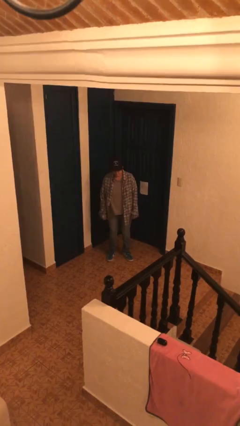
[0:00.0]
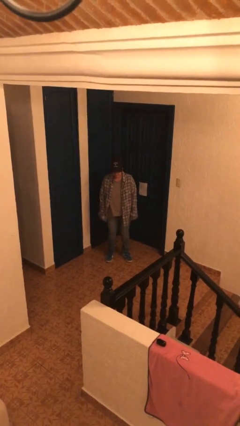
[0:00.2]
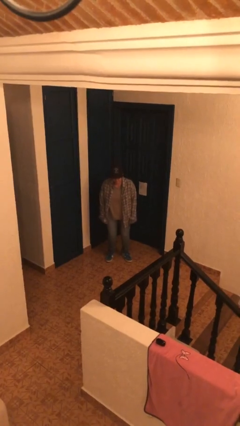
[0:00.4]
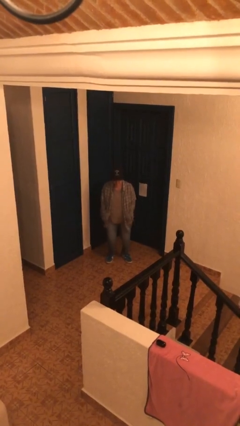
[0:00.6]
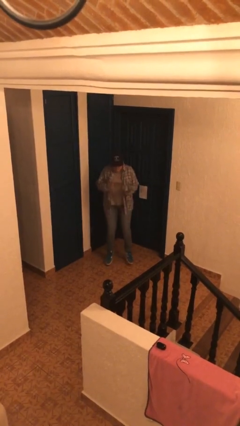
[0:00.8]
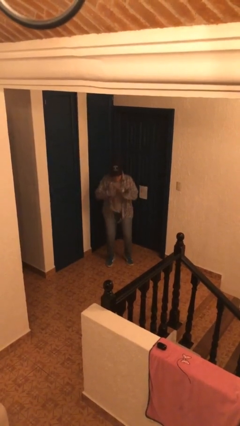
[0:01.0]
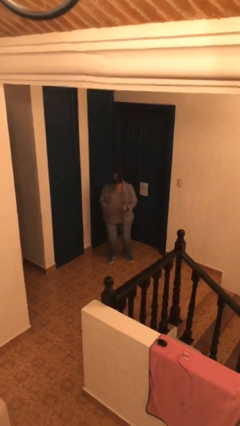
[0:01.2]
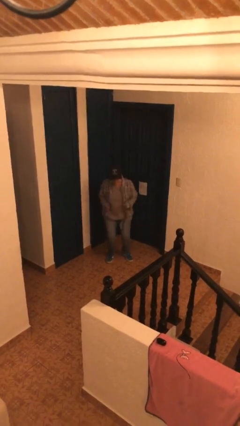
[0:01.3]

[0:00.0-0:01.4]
person jumps

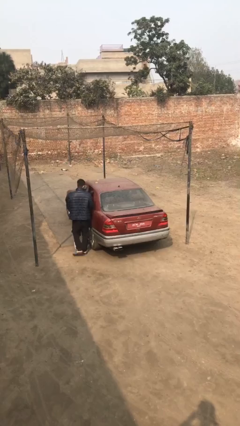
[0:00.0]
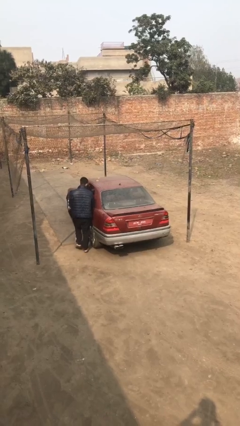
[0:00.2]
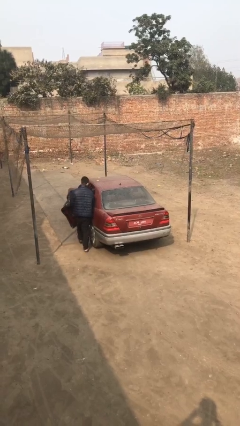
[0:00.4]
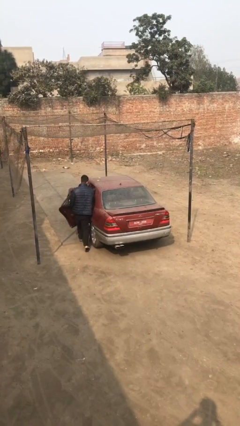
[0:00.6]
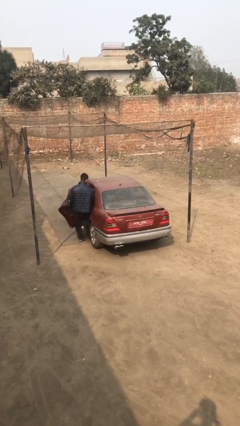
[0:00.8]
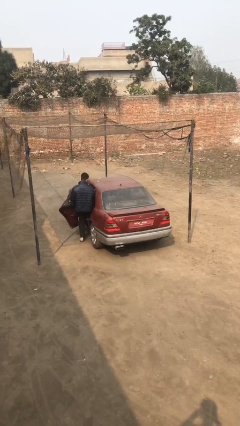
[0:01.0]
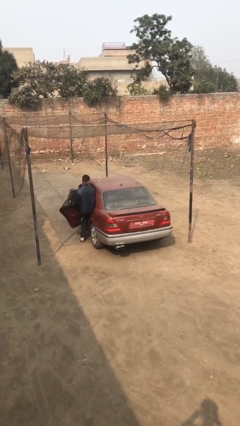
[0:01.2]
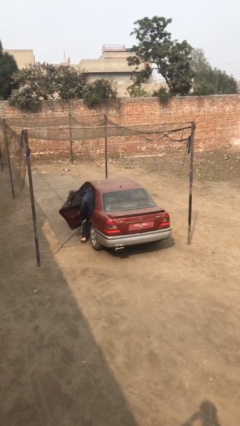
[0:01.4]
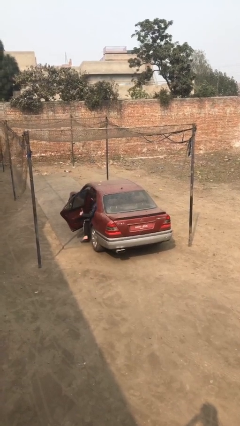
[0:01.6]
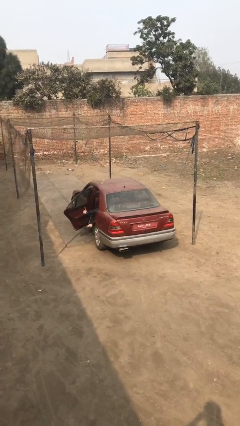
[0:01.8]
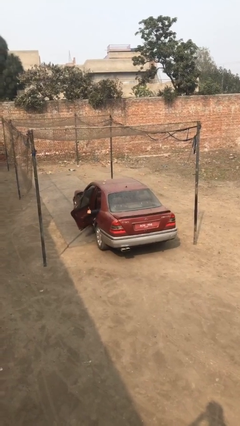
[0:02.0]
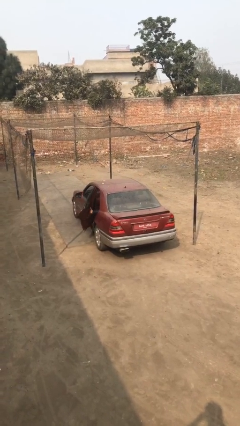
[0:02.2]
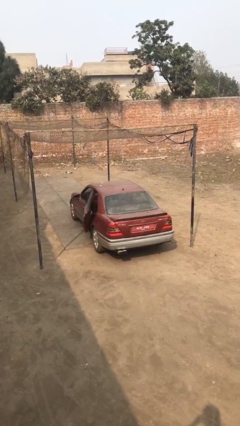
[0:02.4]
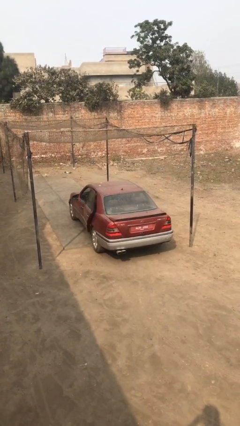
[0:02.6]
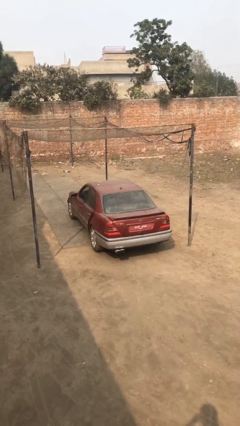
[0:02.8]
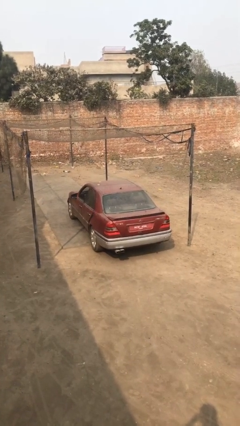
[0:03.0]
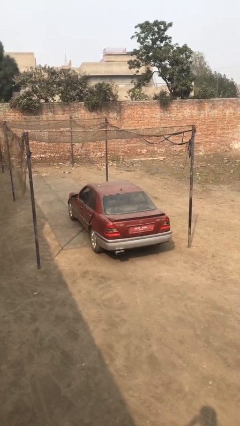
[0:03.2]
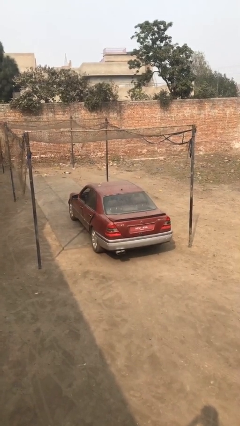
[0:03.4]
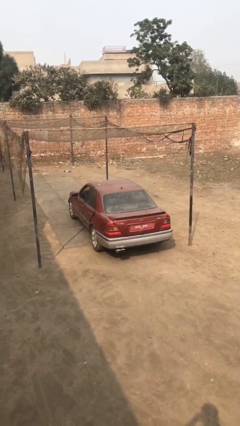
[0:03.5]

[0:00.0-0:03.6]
car picks up person

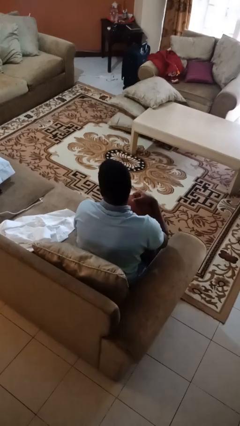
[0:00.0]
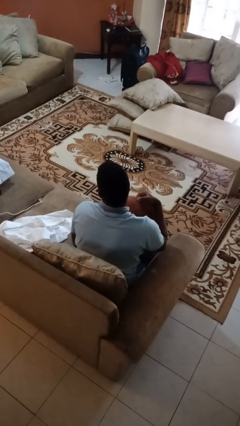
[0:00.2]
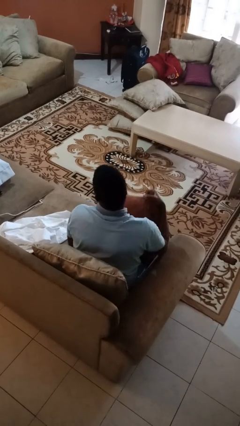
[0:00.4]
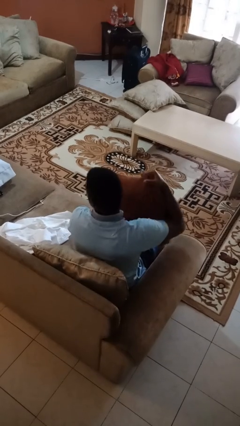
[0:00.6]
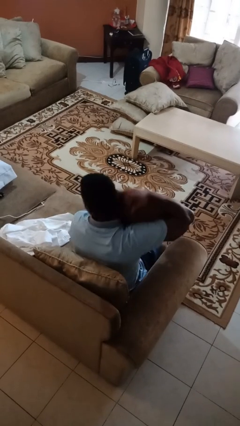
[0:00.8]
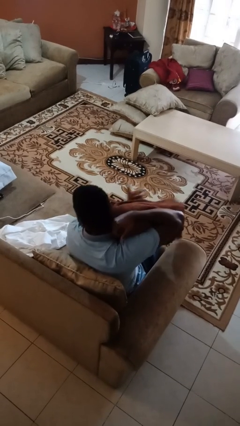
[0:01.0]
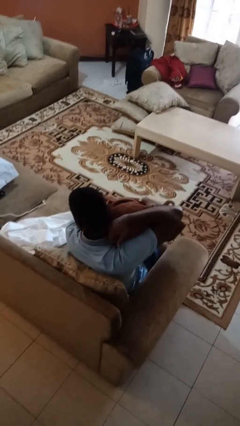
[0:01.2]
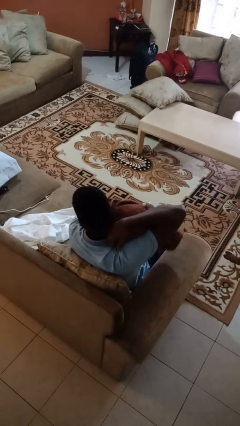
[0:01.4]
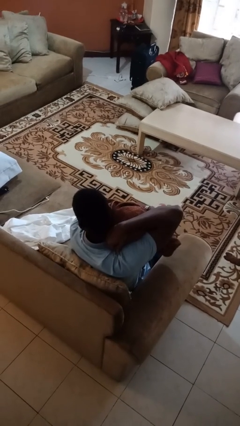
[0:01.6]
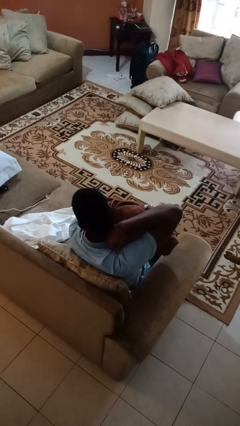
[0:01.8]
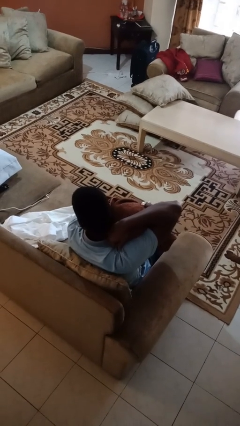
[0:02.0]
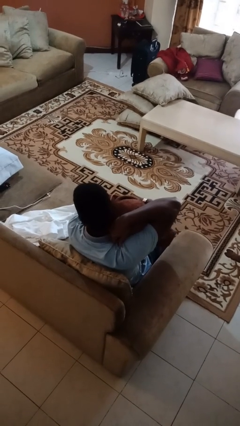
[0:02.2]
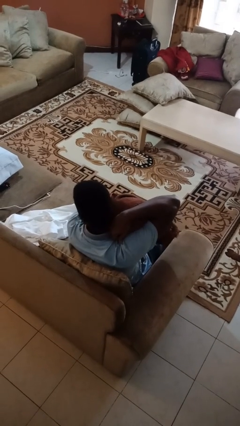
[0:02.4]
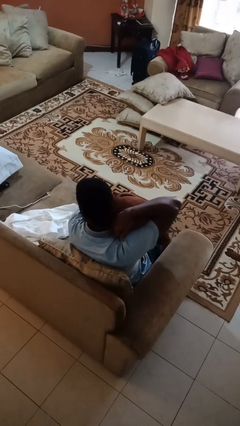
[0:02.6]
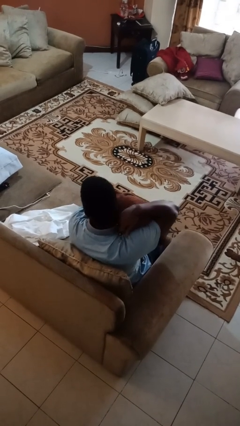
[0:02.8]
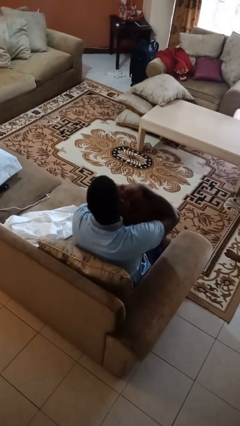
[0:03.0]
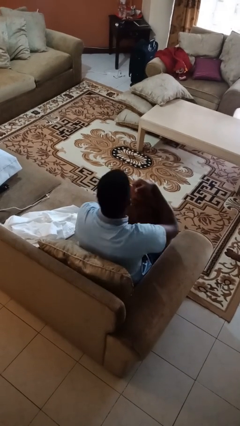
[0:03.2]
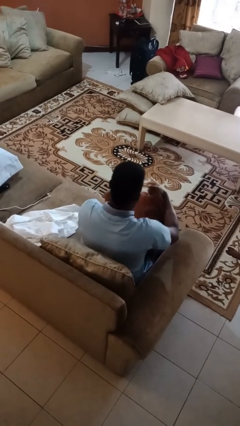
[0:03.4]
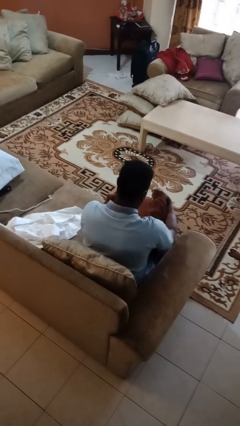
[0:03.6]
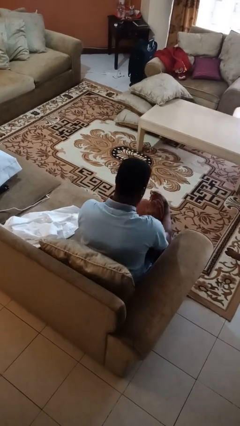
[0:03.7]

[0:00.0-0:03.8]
person hugs stuffed animal

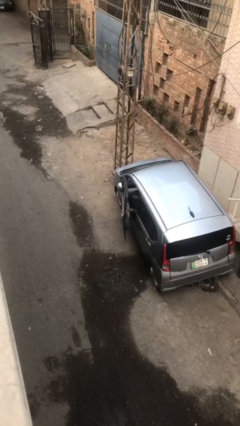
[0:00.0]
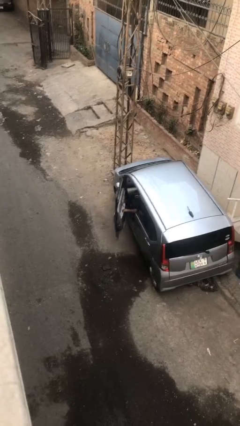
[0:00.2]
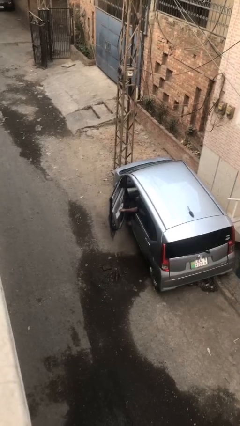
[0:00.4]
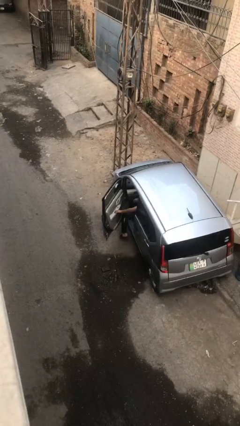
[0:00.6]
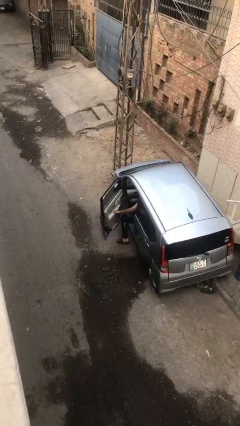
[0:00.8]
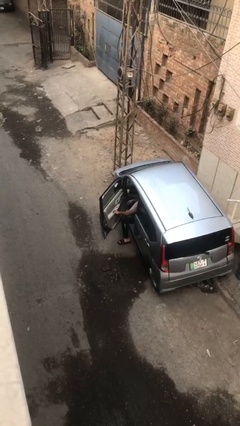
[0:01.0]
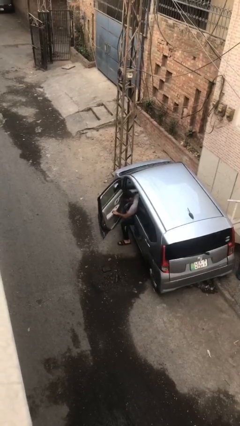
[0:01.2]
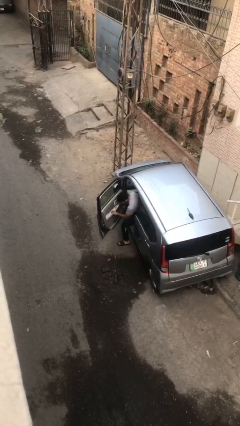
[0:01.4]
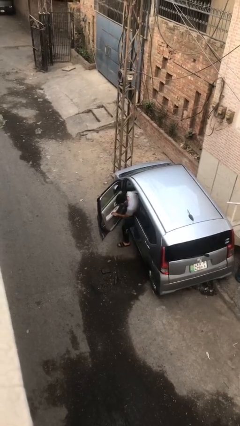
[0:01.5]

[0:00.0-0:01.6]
person opens car door

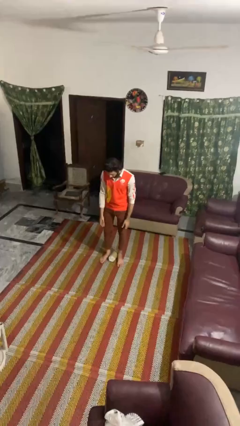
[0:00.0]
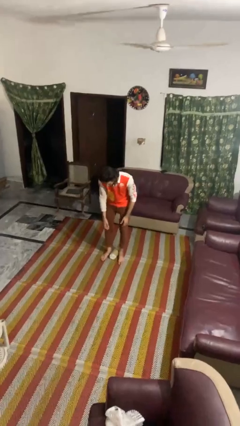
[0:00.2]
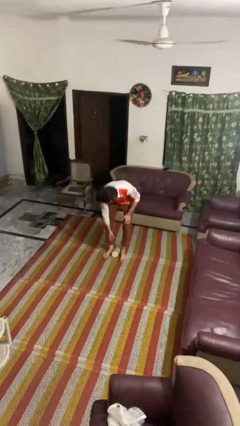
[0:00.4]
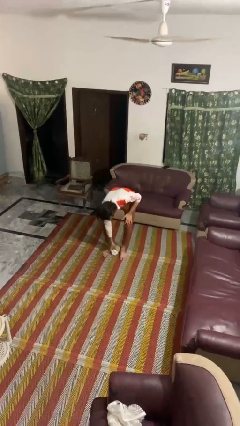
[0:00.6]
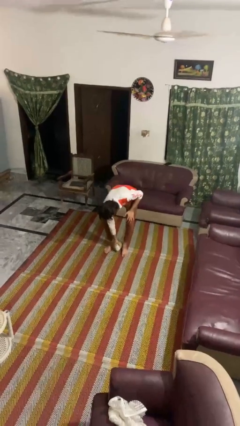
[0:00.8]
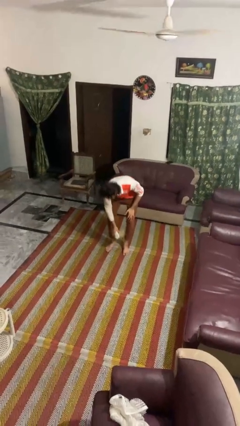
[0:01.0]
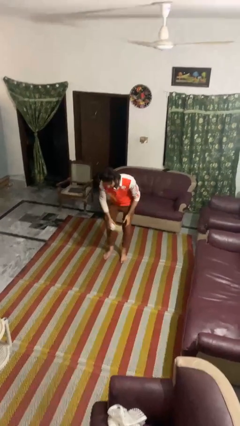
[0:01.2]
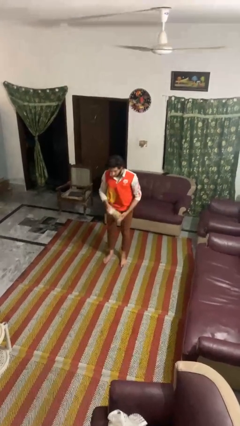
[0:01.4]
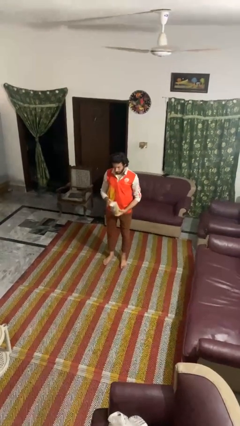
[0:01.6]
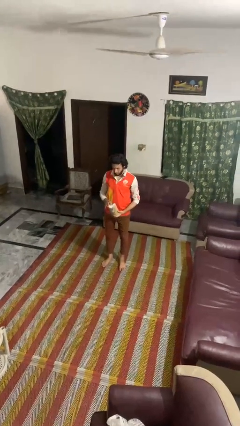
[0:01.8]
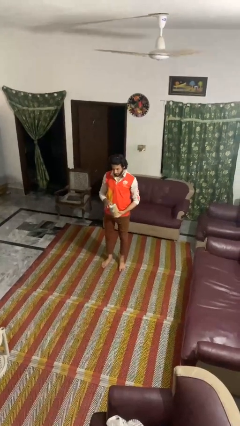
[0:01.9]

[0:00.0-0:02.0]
person picks up object from floor

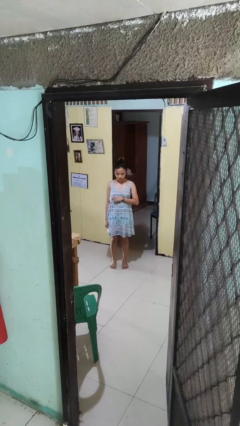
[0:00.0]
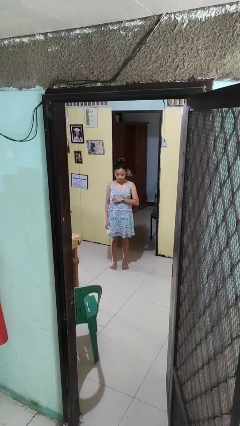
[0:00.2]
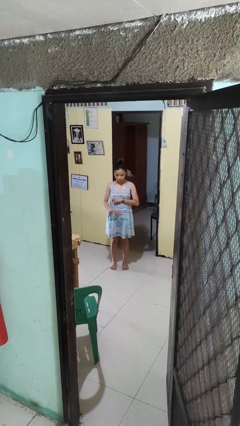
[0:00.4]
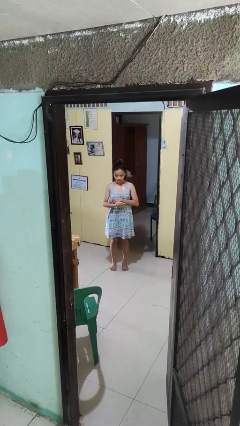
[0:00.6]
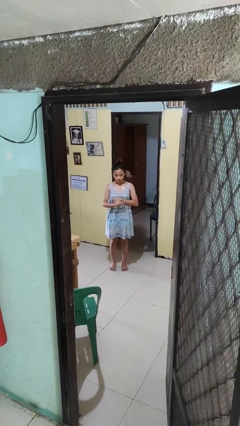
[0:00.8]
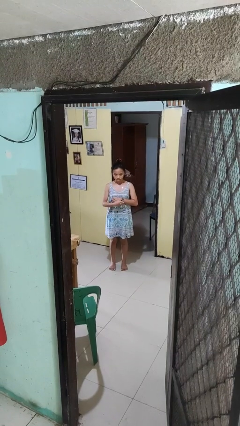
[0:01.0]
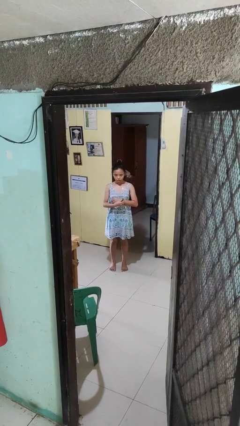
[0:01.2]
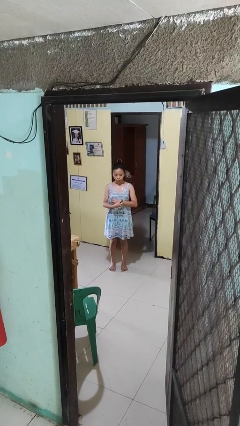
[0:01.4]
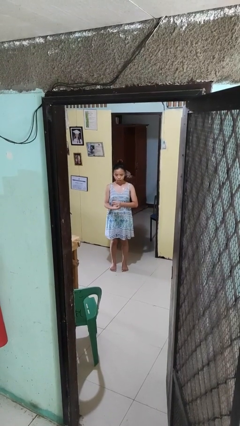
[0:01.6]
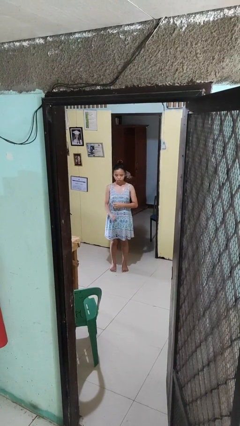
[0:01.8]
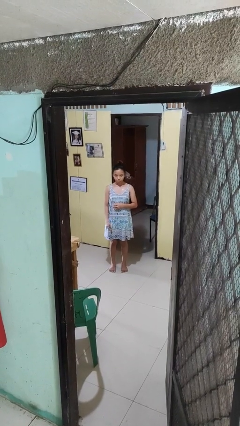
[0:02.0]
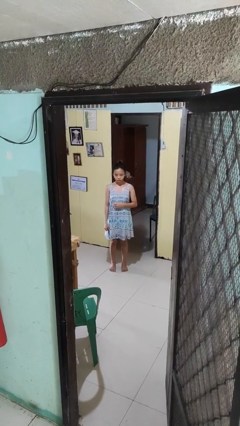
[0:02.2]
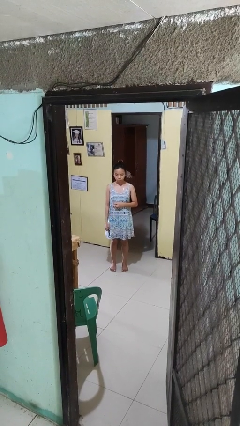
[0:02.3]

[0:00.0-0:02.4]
person takes off wristwatch

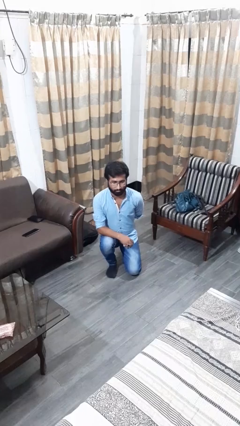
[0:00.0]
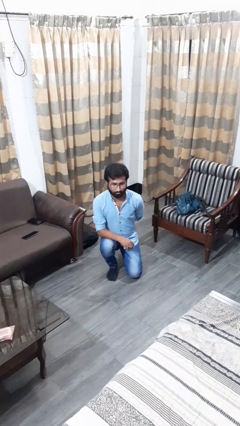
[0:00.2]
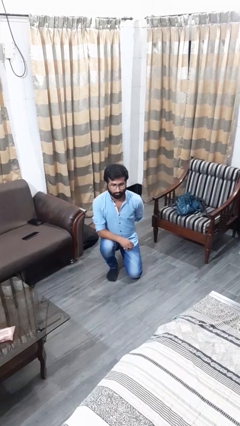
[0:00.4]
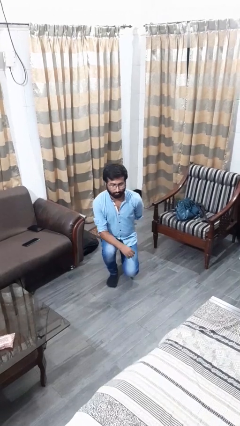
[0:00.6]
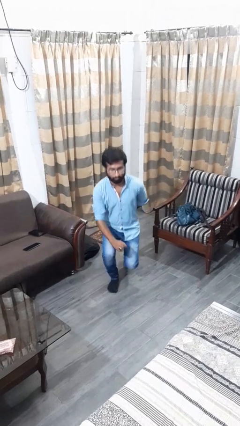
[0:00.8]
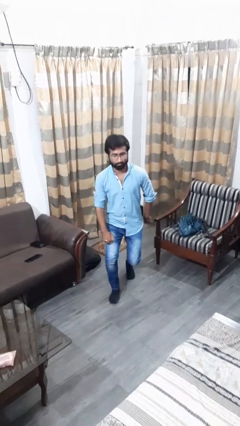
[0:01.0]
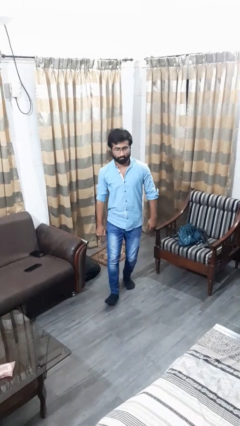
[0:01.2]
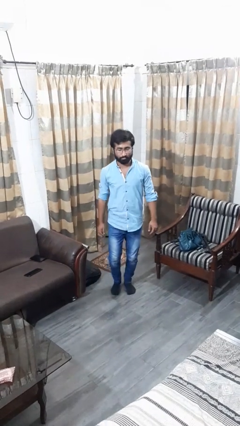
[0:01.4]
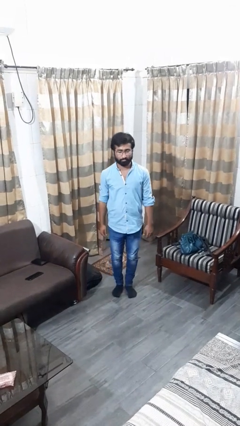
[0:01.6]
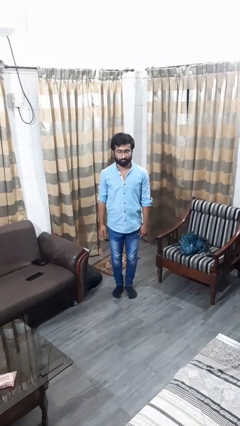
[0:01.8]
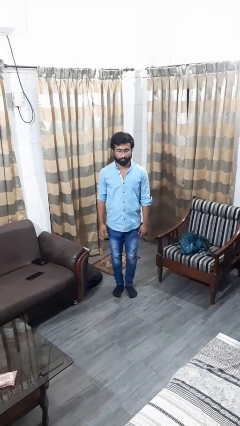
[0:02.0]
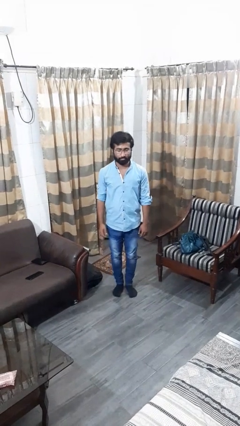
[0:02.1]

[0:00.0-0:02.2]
person stands up from floor
